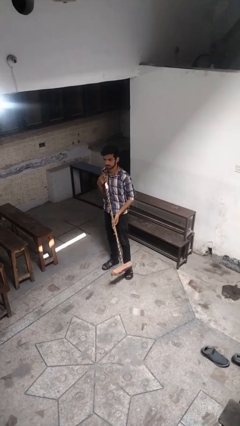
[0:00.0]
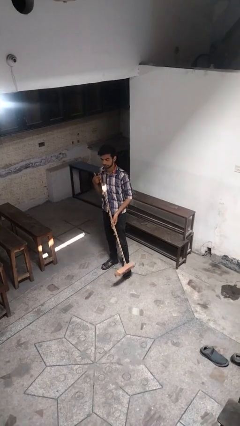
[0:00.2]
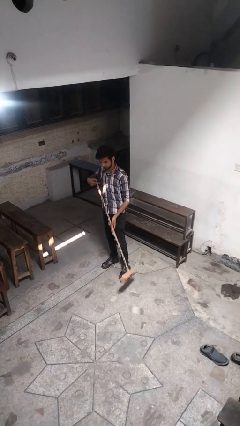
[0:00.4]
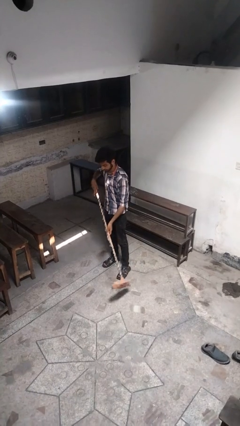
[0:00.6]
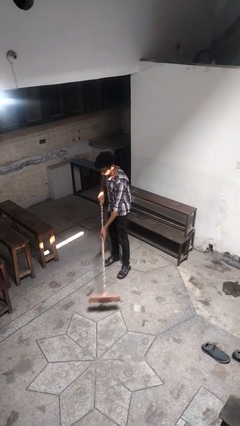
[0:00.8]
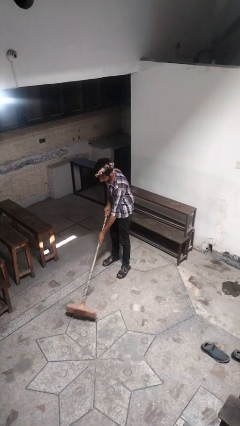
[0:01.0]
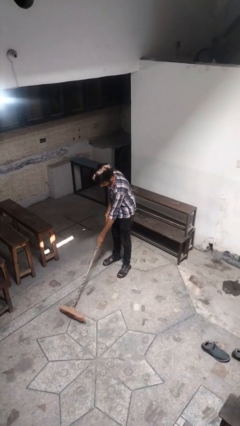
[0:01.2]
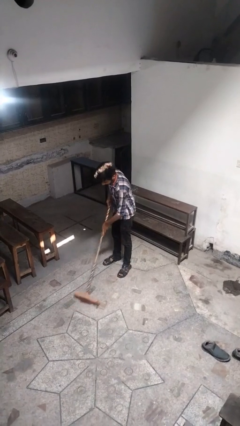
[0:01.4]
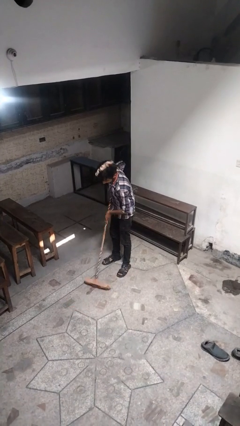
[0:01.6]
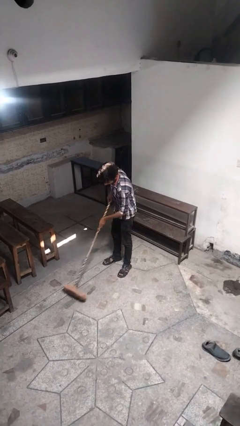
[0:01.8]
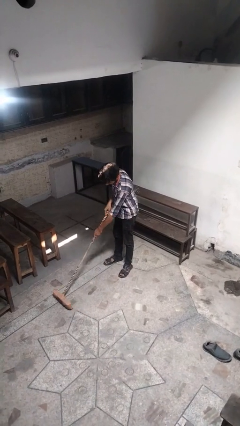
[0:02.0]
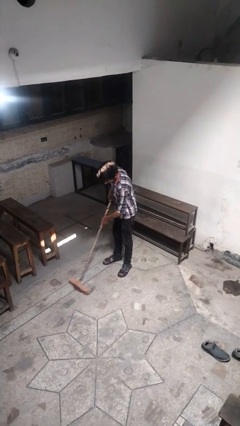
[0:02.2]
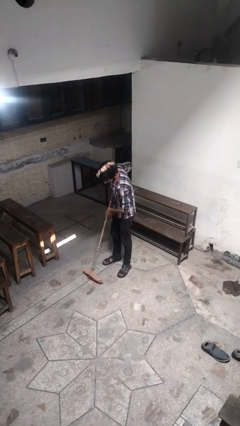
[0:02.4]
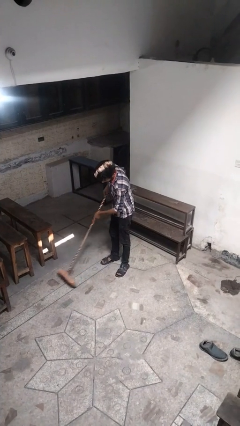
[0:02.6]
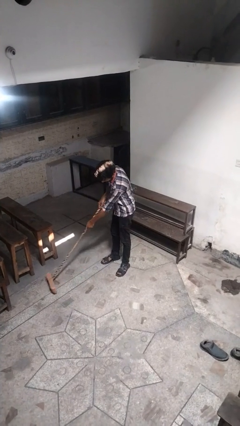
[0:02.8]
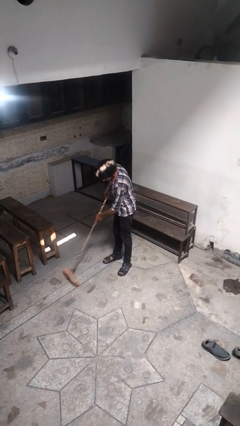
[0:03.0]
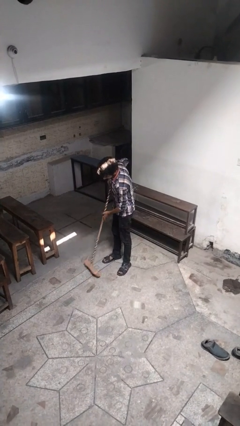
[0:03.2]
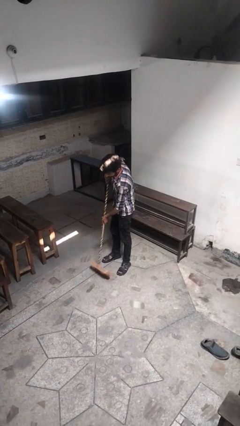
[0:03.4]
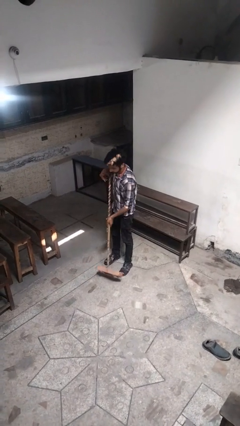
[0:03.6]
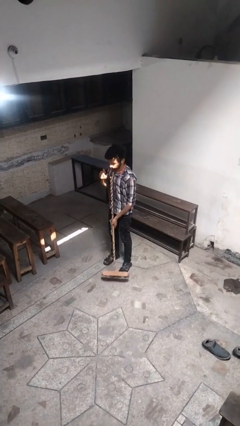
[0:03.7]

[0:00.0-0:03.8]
person sweeps floor

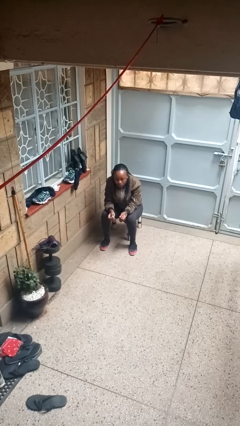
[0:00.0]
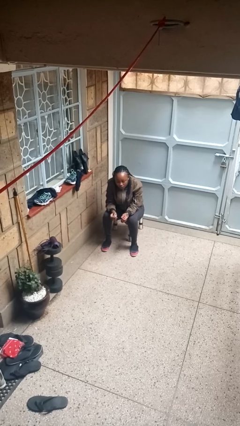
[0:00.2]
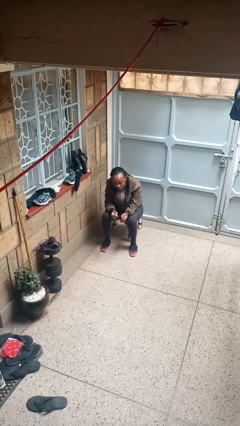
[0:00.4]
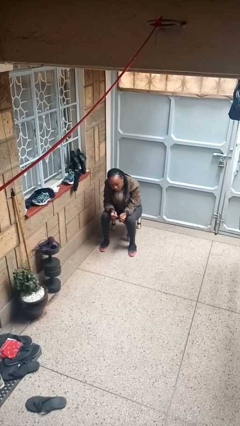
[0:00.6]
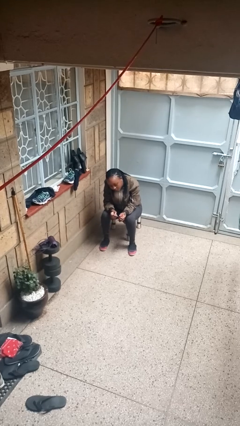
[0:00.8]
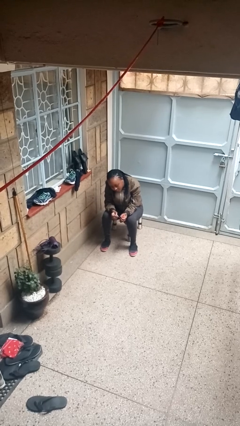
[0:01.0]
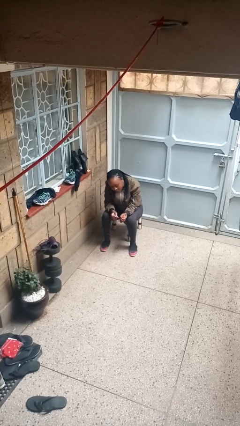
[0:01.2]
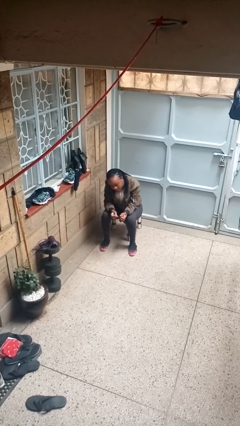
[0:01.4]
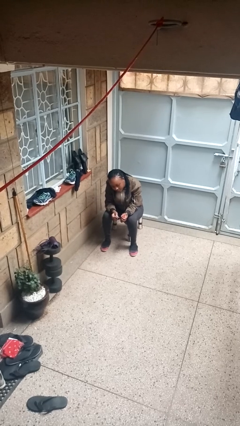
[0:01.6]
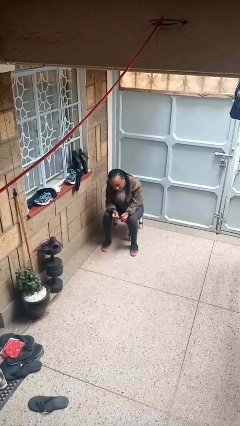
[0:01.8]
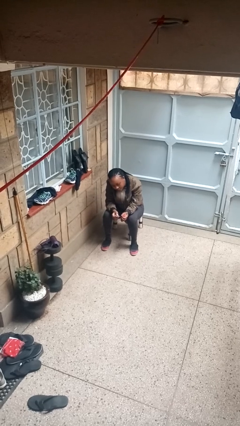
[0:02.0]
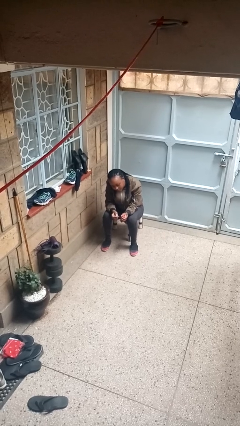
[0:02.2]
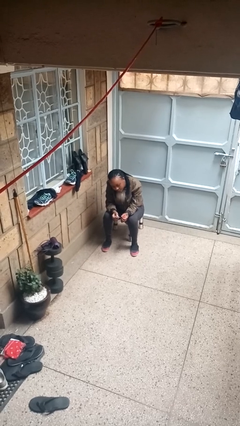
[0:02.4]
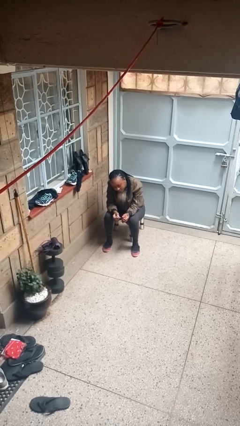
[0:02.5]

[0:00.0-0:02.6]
person paints fingernails

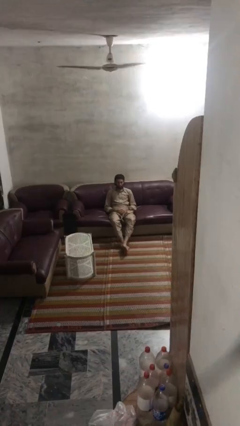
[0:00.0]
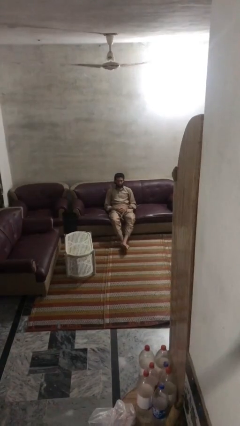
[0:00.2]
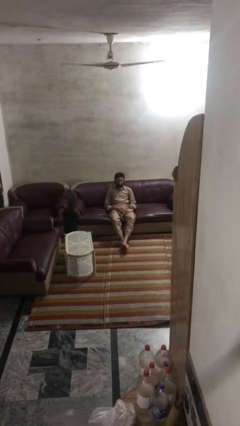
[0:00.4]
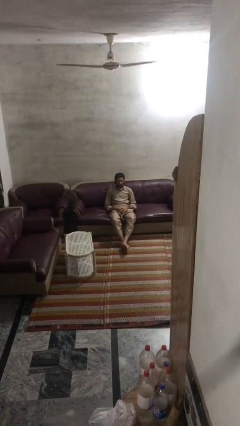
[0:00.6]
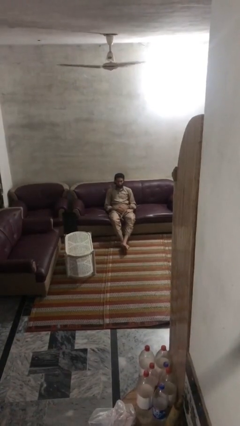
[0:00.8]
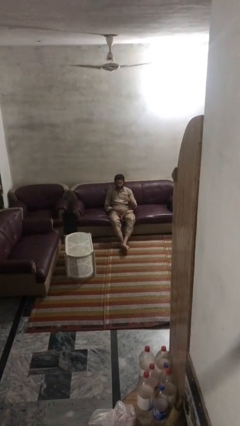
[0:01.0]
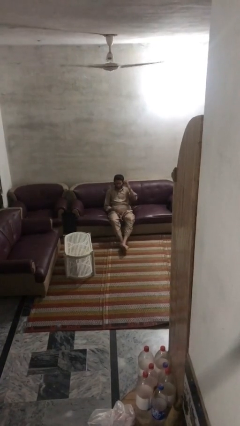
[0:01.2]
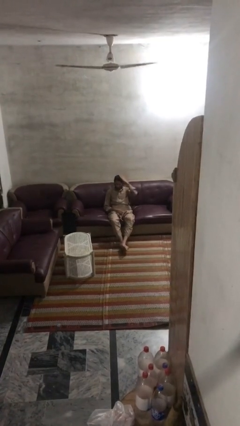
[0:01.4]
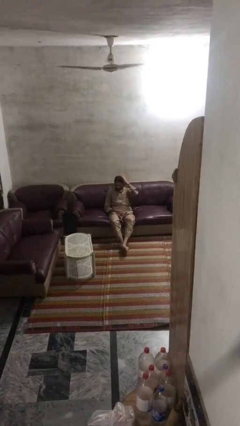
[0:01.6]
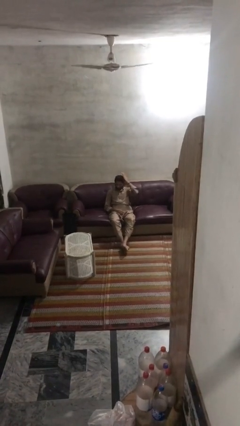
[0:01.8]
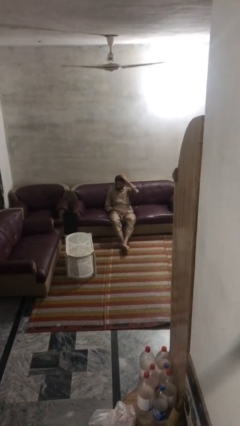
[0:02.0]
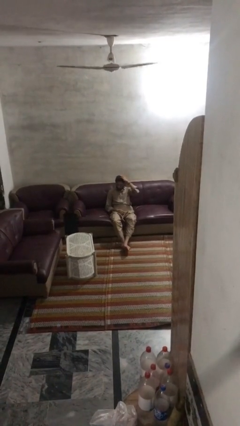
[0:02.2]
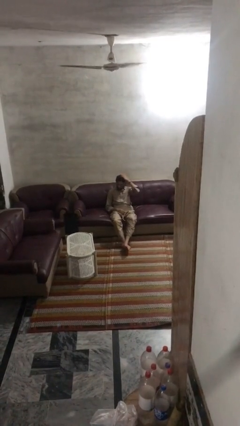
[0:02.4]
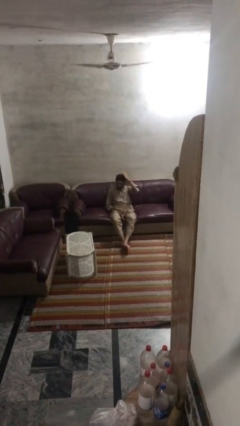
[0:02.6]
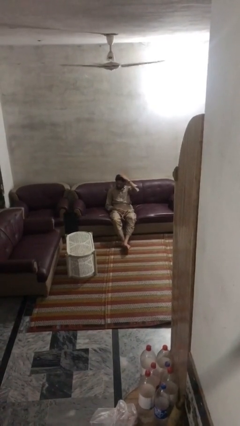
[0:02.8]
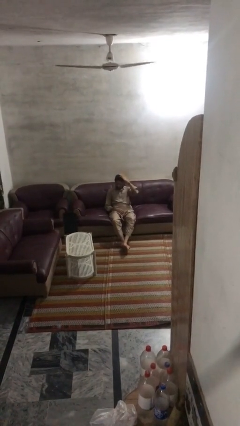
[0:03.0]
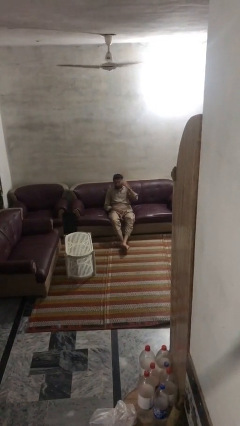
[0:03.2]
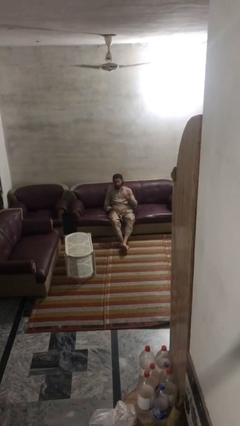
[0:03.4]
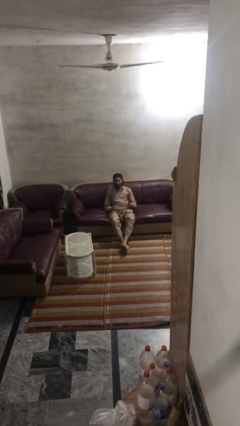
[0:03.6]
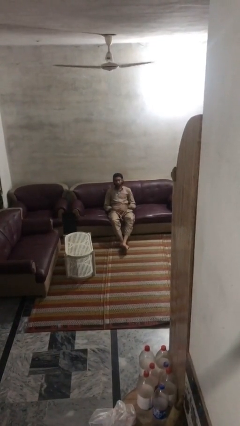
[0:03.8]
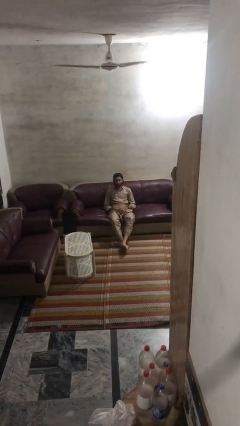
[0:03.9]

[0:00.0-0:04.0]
person pats head

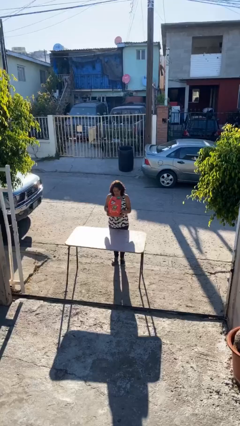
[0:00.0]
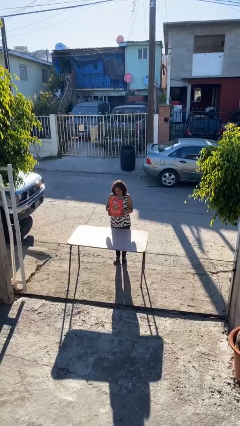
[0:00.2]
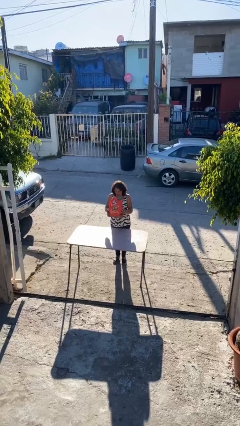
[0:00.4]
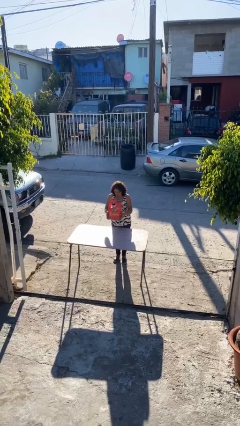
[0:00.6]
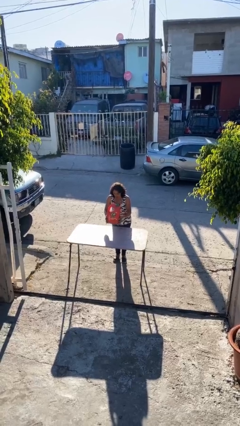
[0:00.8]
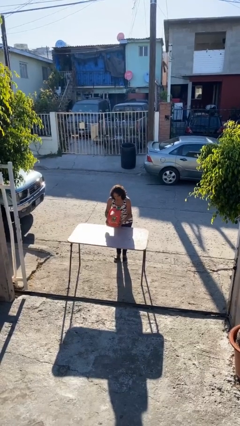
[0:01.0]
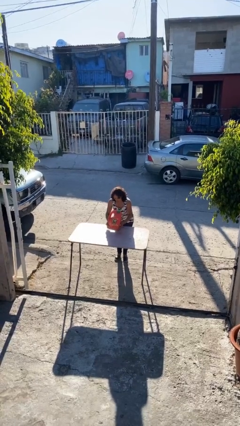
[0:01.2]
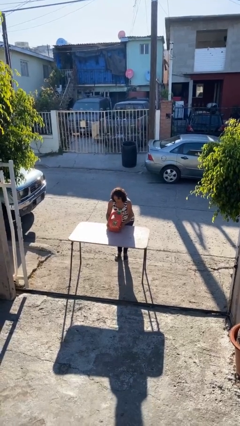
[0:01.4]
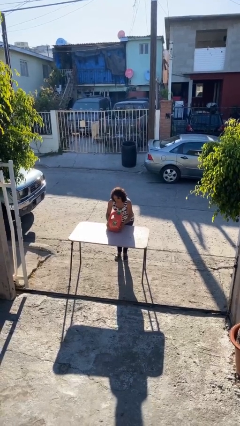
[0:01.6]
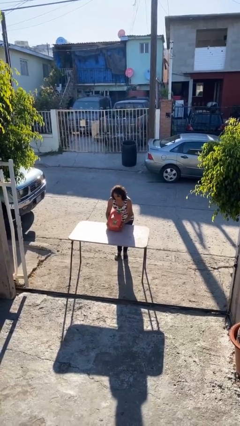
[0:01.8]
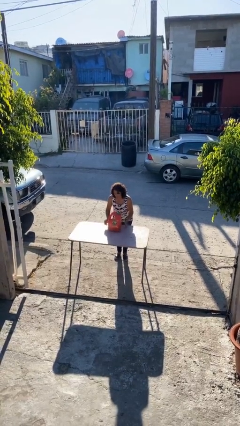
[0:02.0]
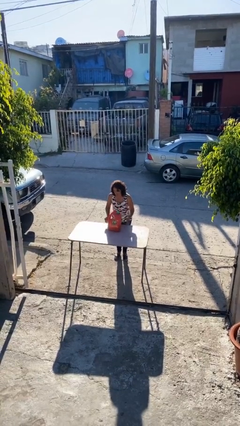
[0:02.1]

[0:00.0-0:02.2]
person puts down object on table

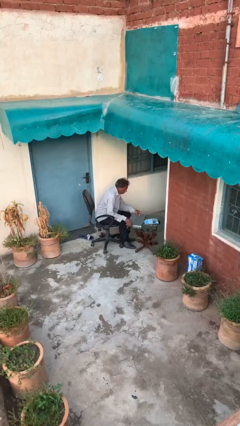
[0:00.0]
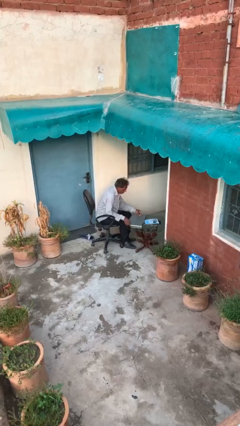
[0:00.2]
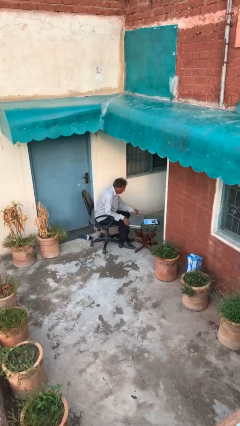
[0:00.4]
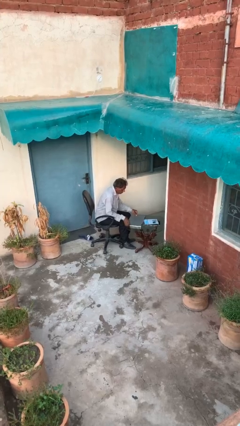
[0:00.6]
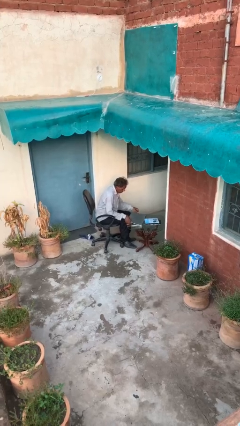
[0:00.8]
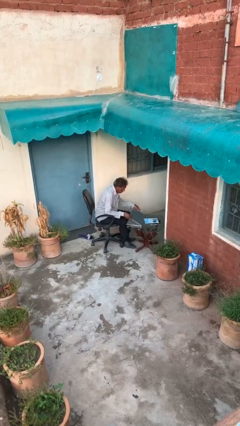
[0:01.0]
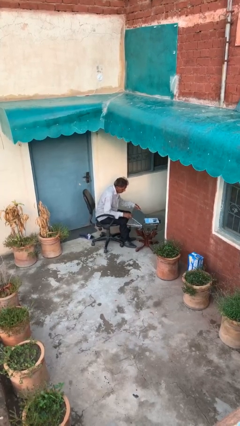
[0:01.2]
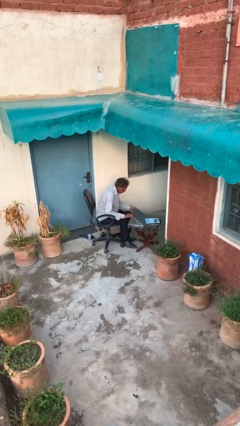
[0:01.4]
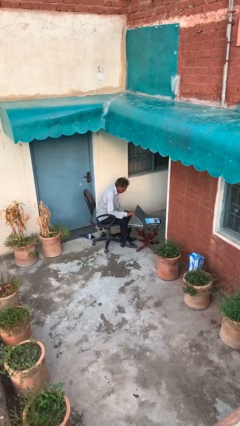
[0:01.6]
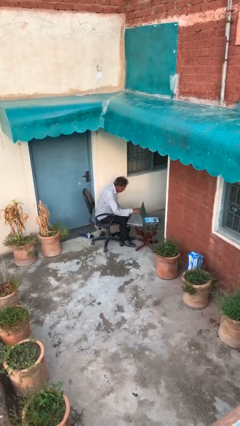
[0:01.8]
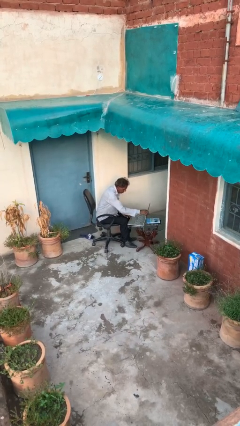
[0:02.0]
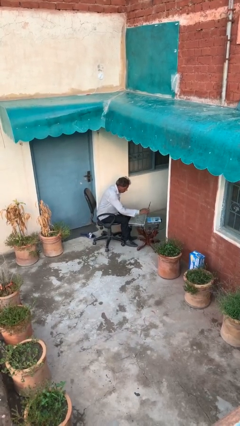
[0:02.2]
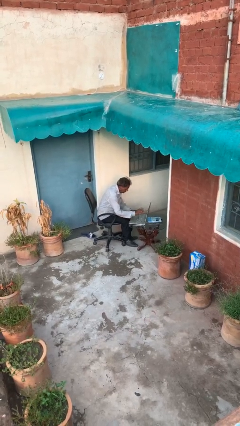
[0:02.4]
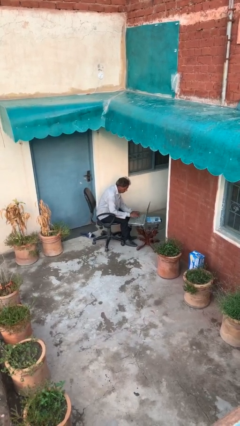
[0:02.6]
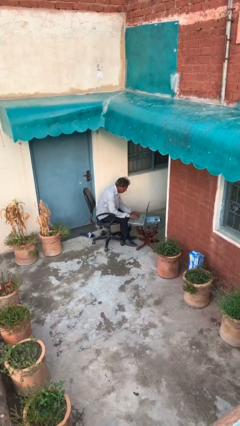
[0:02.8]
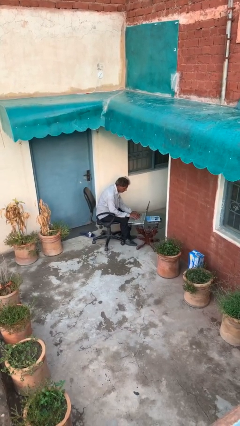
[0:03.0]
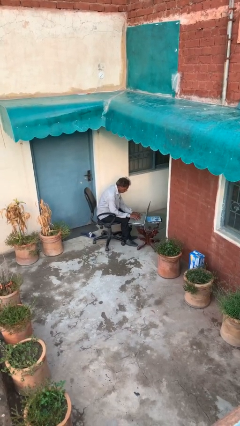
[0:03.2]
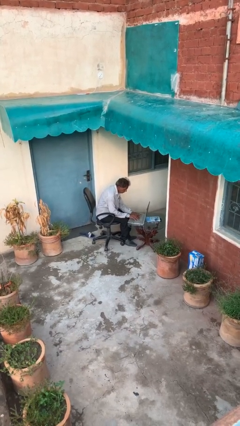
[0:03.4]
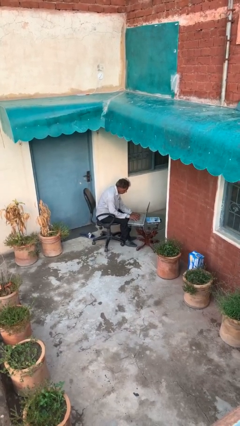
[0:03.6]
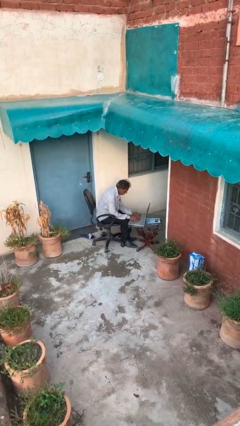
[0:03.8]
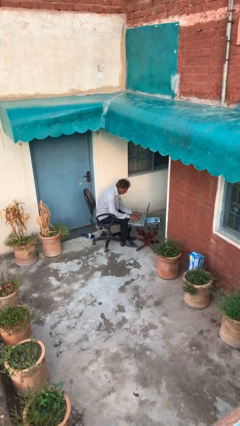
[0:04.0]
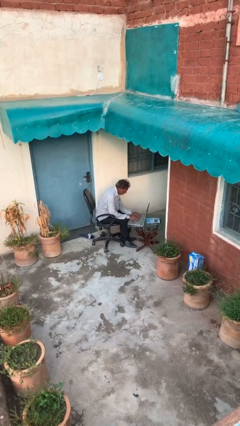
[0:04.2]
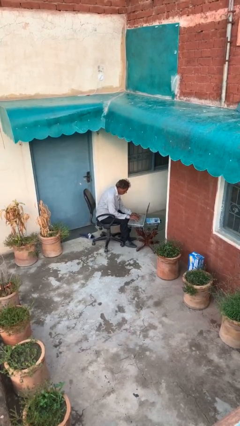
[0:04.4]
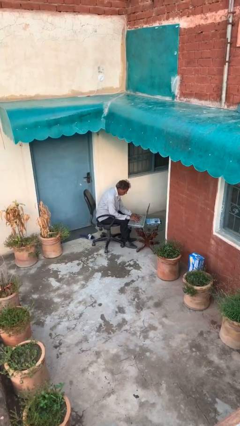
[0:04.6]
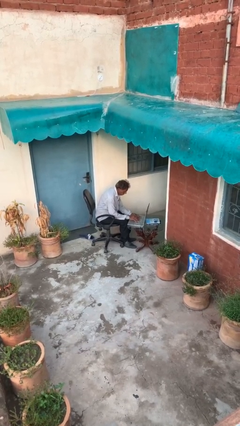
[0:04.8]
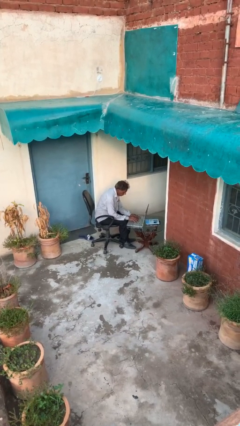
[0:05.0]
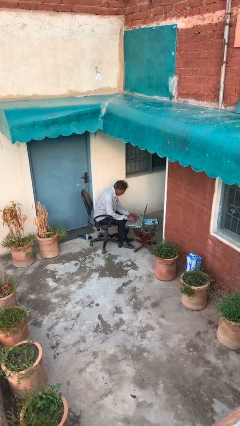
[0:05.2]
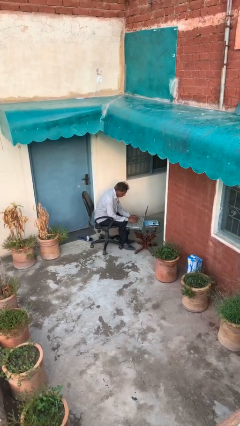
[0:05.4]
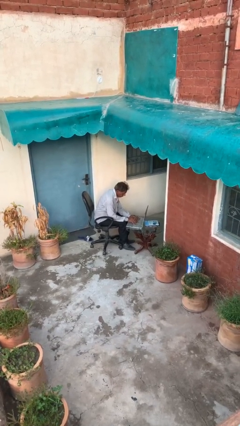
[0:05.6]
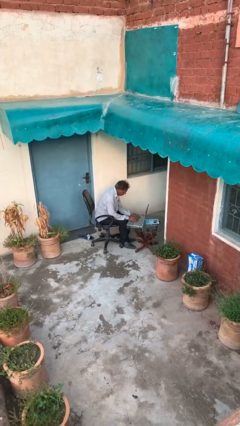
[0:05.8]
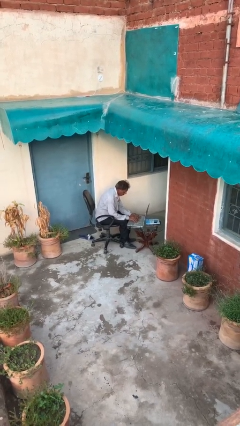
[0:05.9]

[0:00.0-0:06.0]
person interacts with laptop
